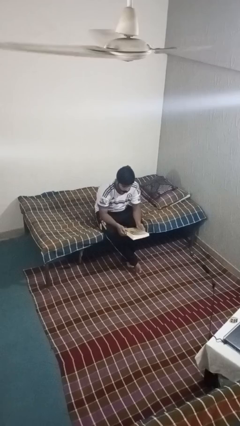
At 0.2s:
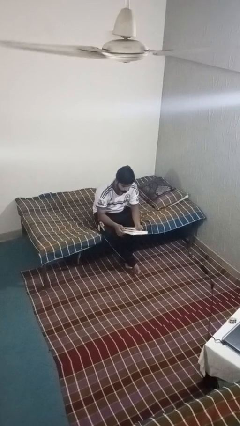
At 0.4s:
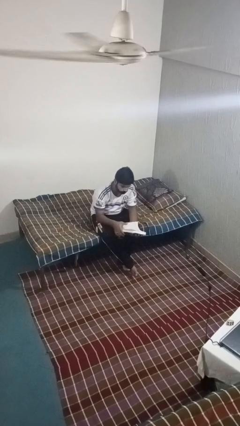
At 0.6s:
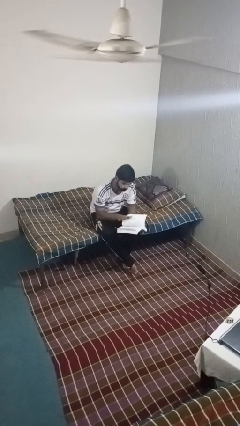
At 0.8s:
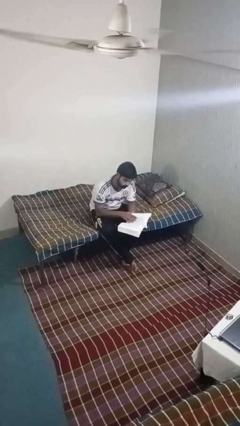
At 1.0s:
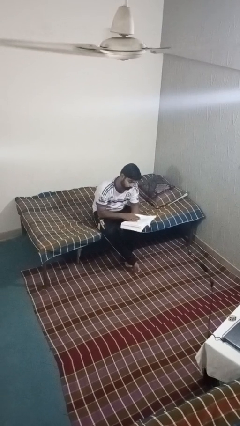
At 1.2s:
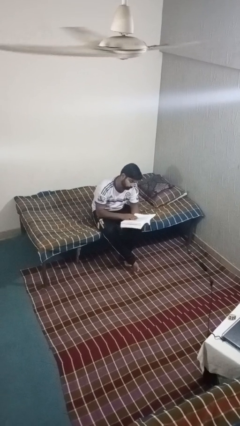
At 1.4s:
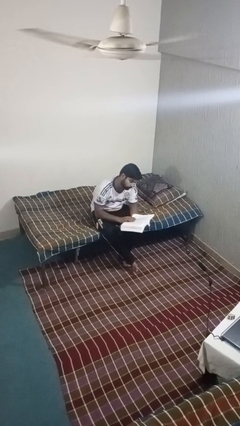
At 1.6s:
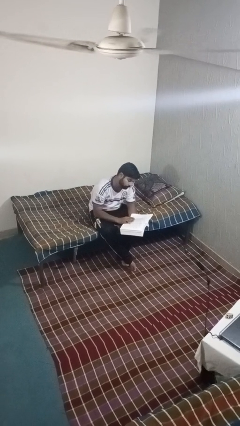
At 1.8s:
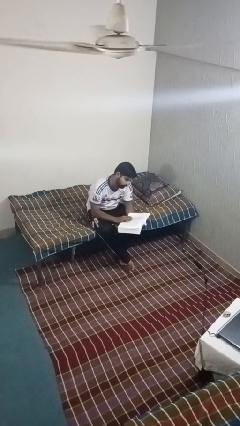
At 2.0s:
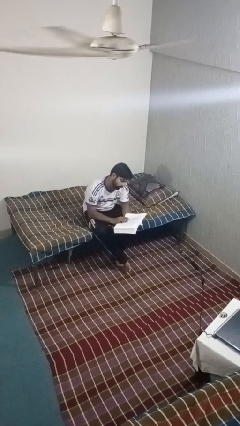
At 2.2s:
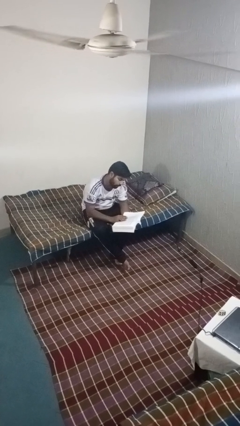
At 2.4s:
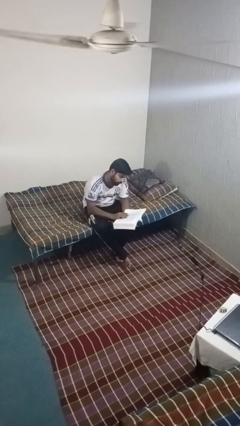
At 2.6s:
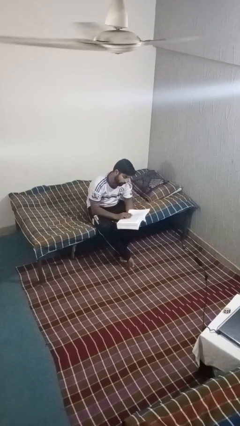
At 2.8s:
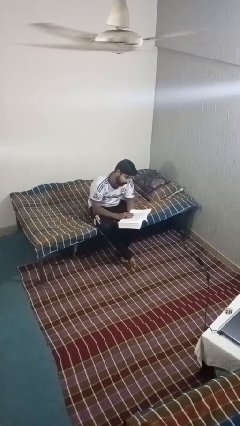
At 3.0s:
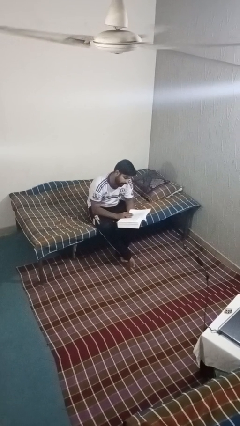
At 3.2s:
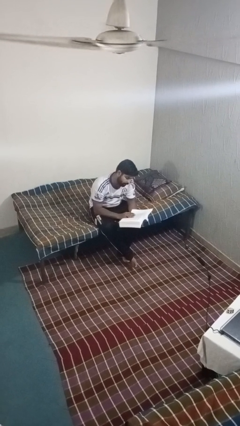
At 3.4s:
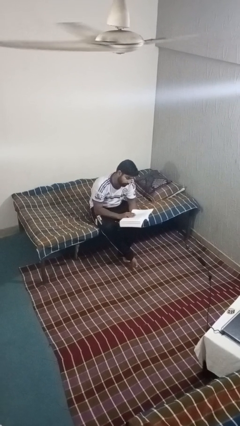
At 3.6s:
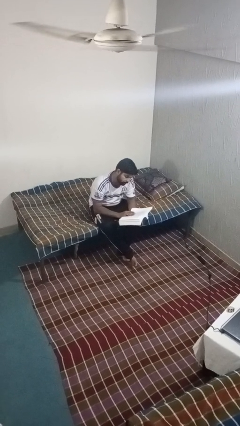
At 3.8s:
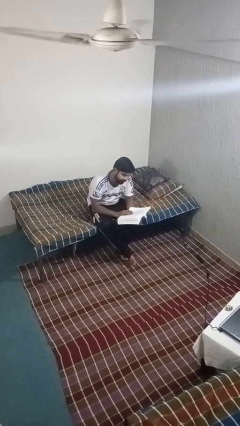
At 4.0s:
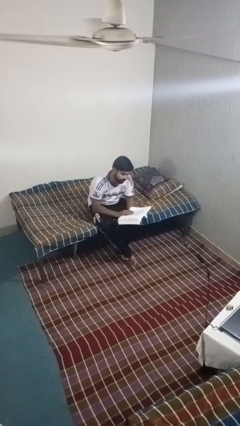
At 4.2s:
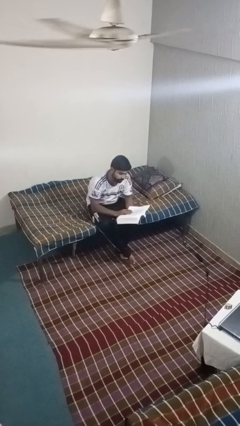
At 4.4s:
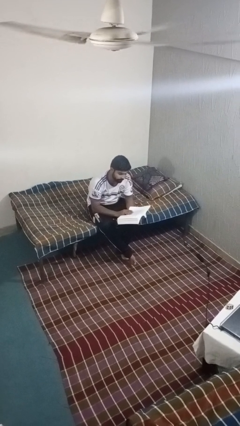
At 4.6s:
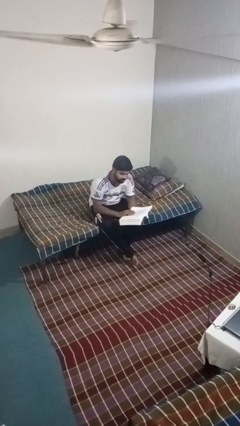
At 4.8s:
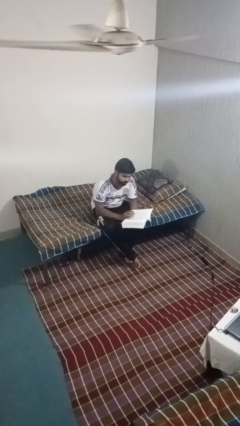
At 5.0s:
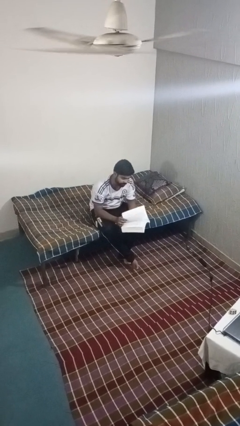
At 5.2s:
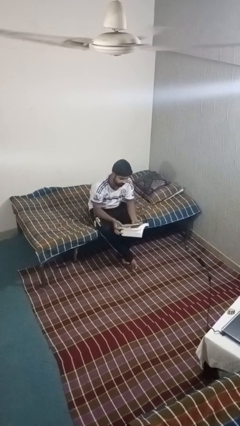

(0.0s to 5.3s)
person reads book

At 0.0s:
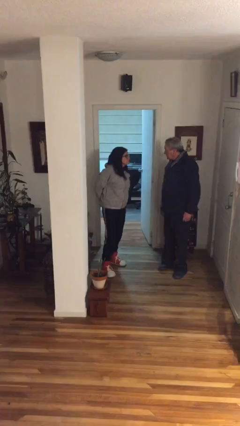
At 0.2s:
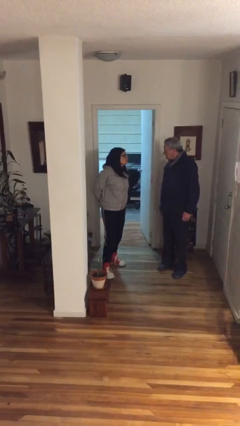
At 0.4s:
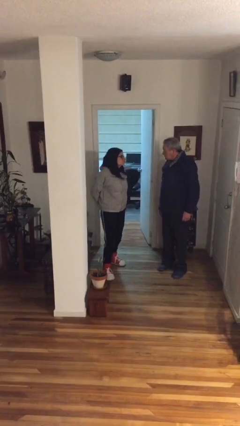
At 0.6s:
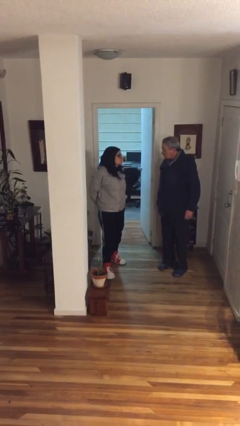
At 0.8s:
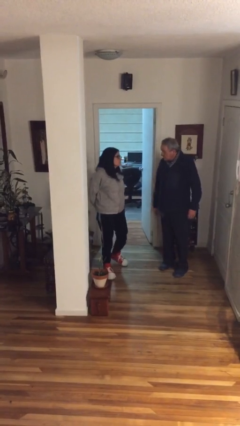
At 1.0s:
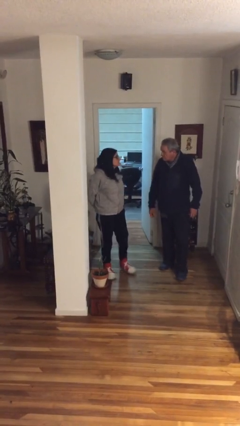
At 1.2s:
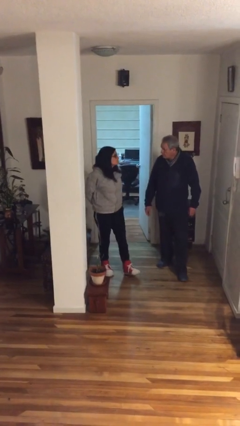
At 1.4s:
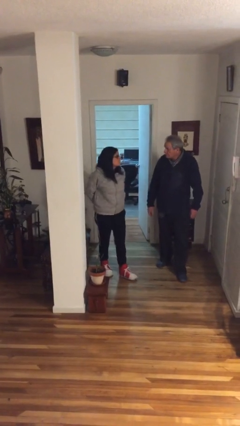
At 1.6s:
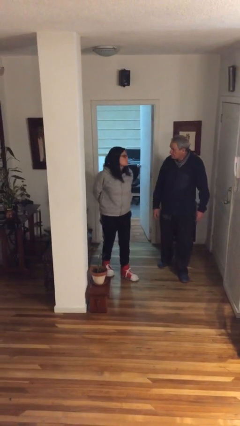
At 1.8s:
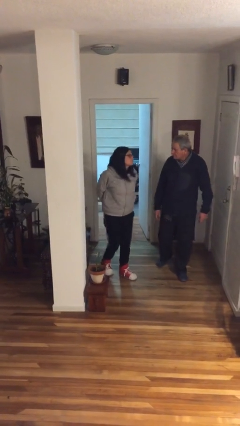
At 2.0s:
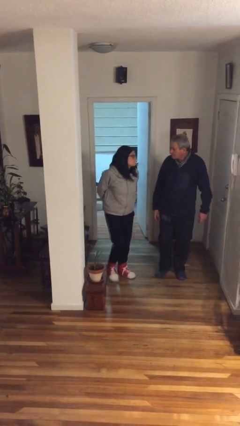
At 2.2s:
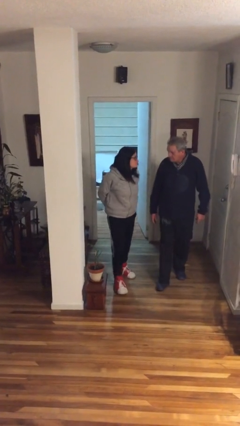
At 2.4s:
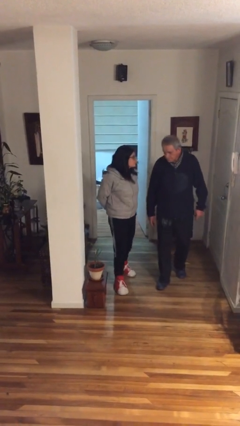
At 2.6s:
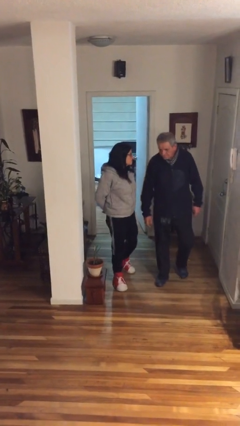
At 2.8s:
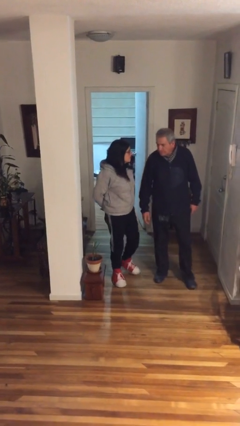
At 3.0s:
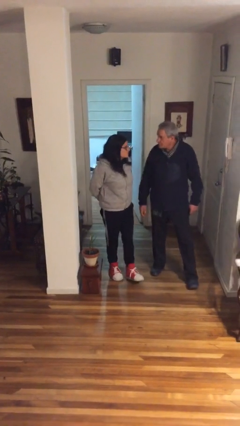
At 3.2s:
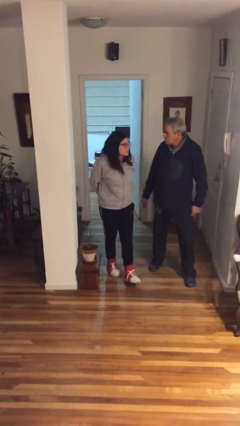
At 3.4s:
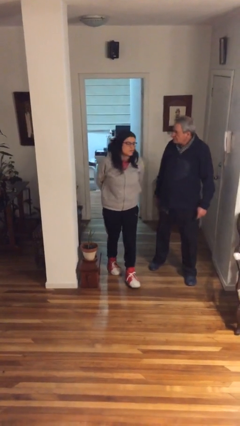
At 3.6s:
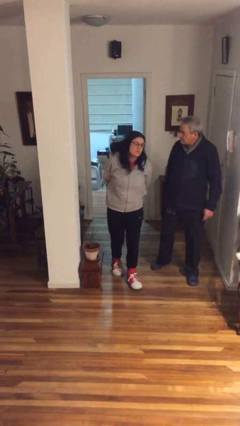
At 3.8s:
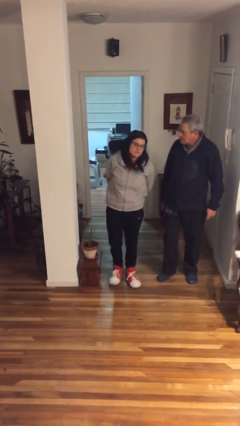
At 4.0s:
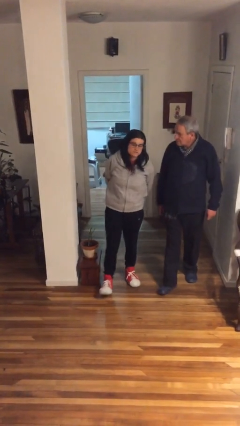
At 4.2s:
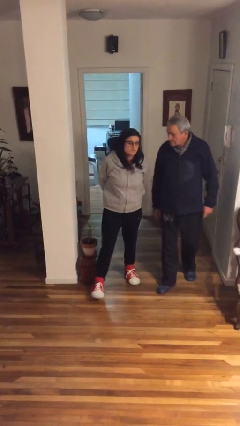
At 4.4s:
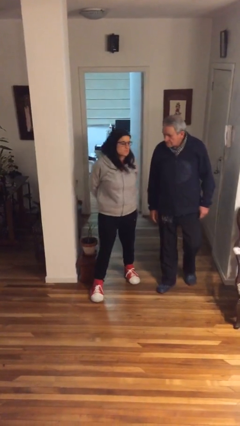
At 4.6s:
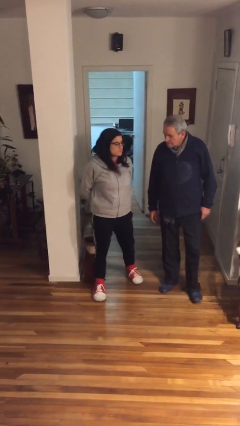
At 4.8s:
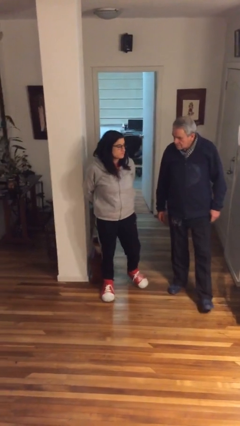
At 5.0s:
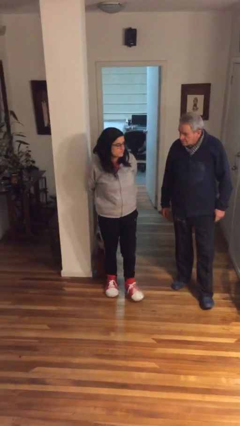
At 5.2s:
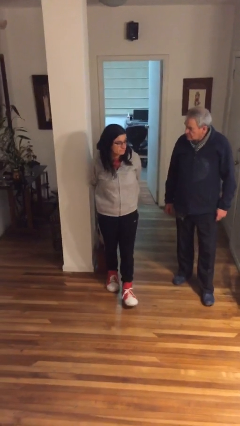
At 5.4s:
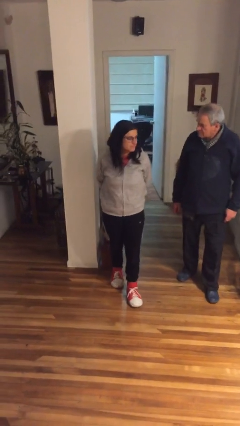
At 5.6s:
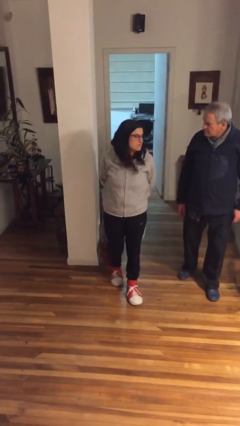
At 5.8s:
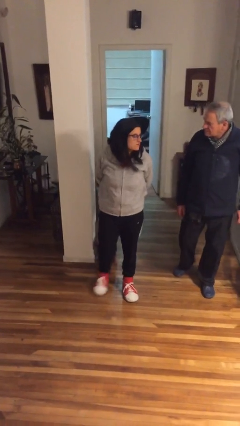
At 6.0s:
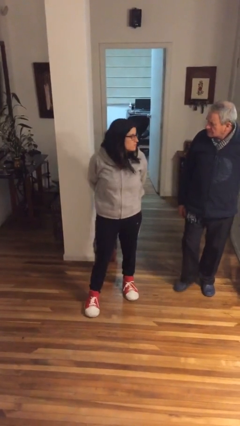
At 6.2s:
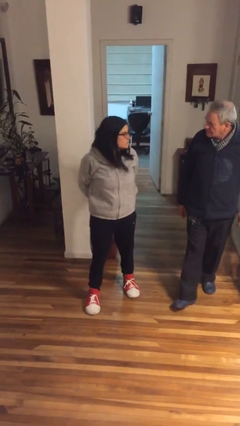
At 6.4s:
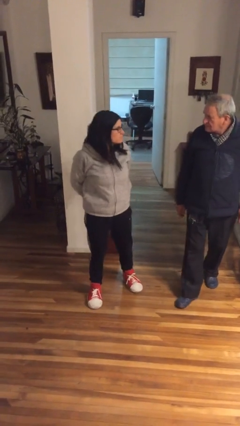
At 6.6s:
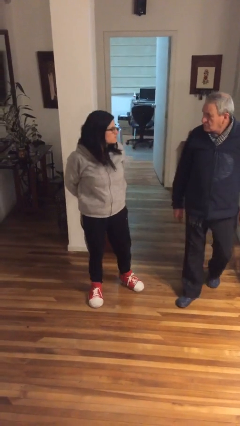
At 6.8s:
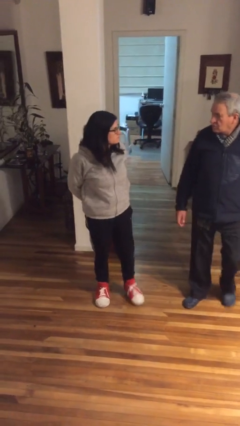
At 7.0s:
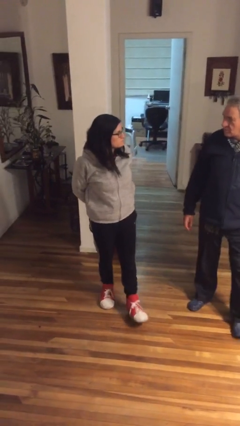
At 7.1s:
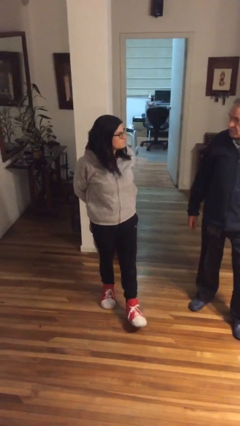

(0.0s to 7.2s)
person talks to person

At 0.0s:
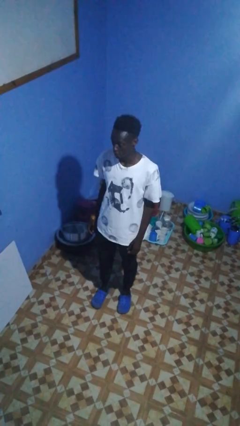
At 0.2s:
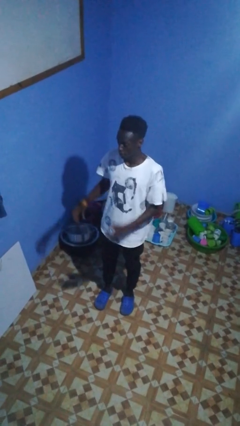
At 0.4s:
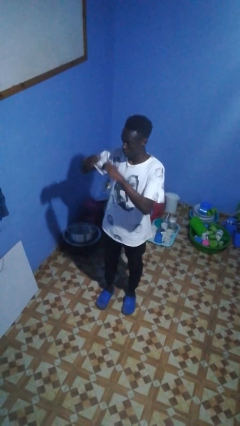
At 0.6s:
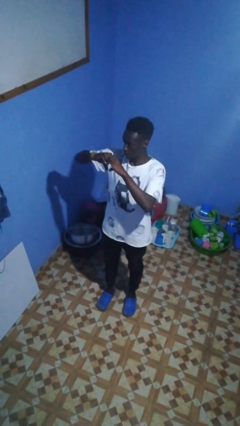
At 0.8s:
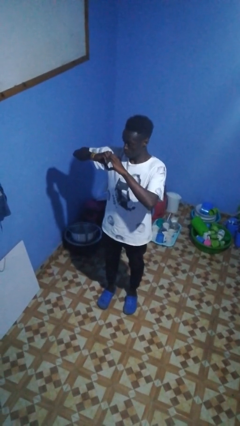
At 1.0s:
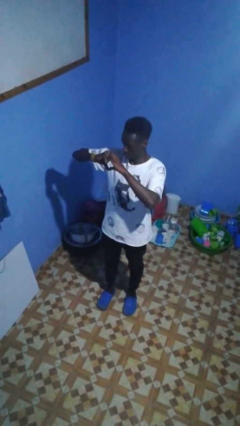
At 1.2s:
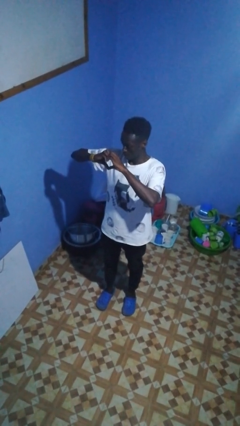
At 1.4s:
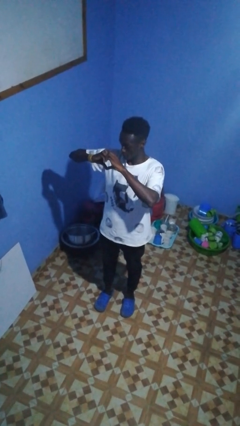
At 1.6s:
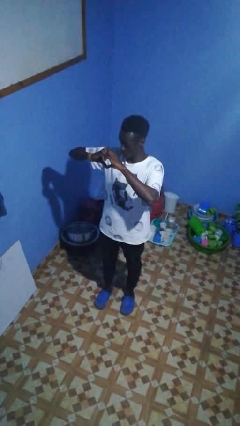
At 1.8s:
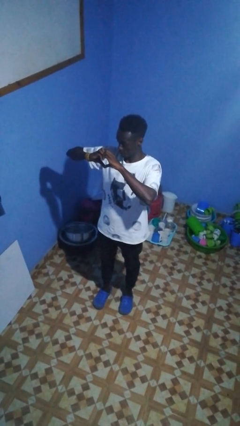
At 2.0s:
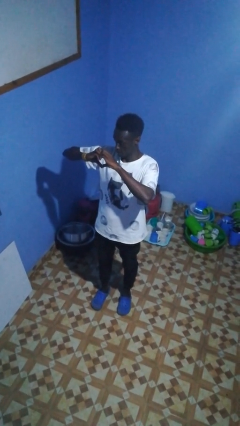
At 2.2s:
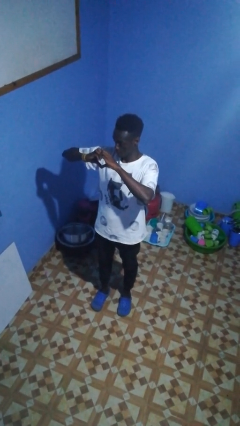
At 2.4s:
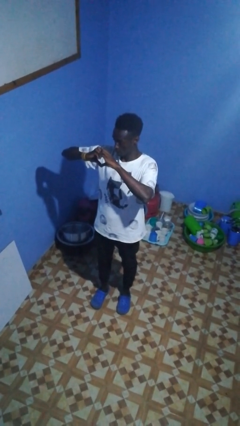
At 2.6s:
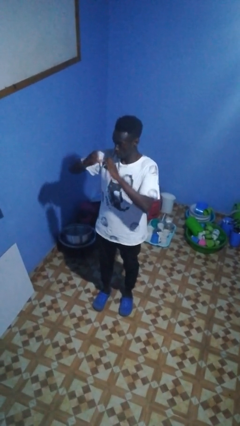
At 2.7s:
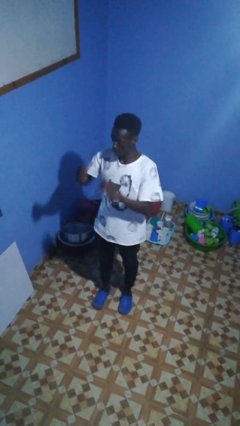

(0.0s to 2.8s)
person gestures heart

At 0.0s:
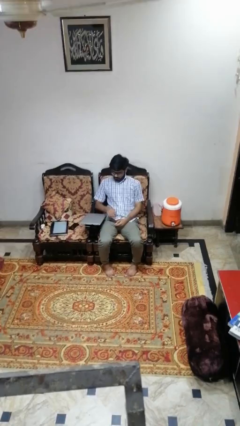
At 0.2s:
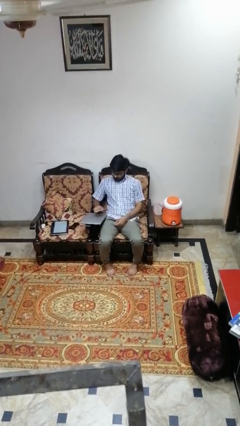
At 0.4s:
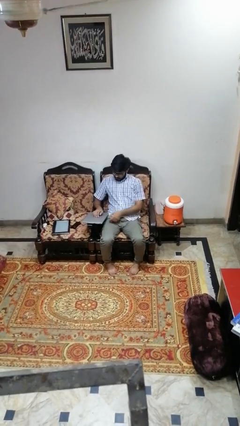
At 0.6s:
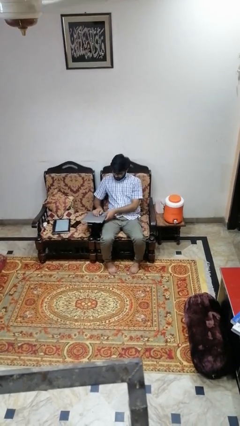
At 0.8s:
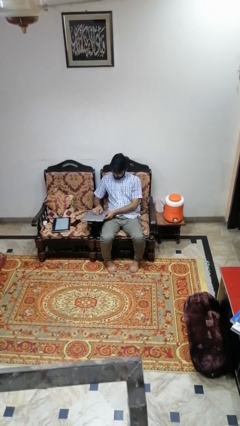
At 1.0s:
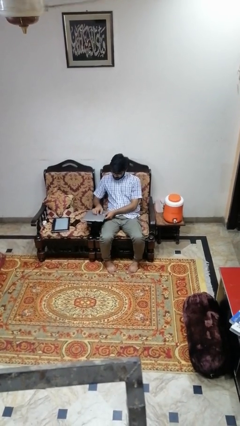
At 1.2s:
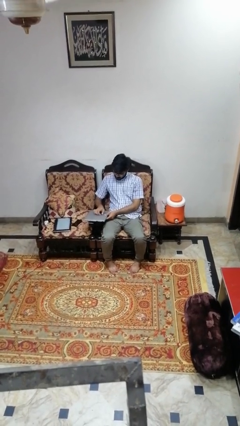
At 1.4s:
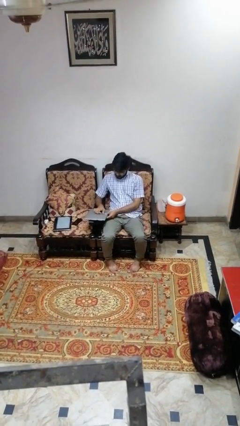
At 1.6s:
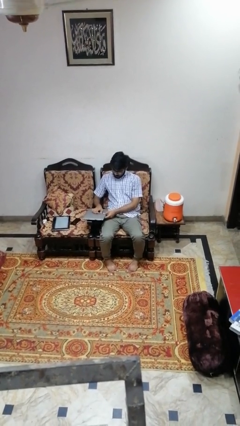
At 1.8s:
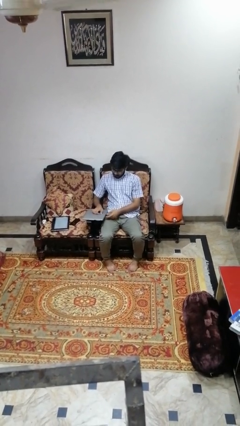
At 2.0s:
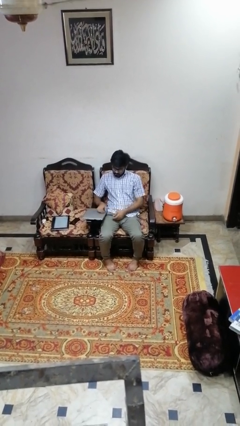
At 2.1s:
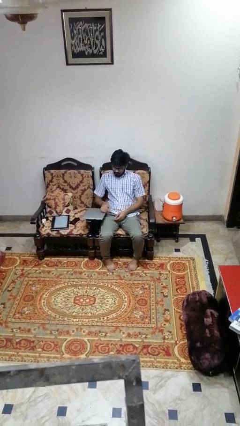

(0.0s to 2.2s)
person taps object with finger

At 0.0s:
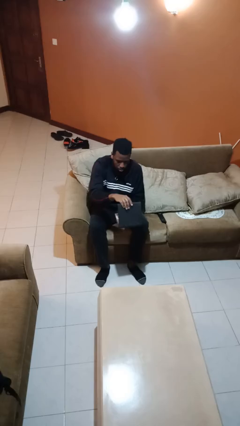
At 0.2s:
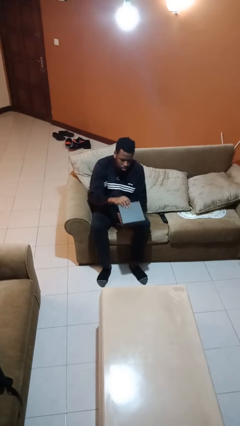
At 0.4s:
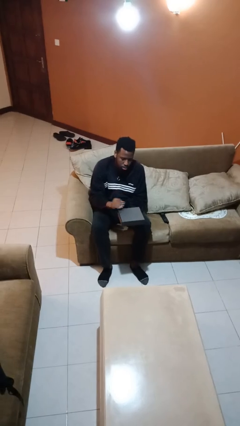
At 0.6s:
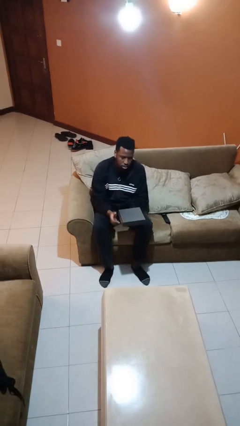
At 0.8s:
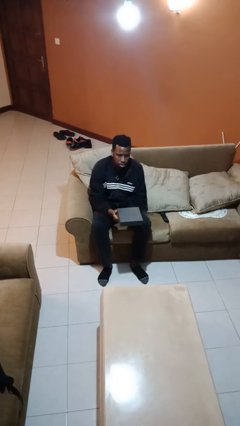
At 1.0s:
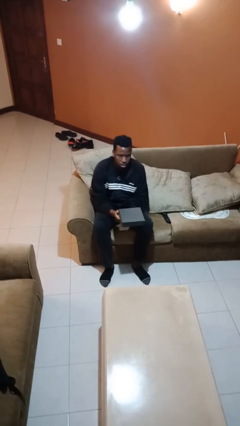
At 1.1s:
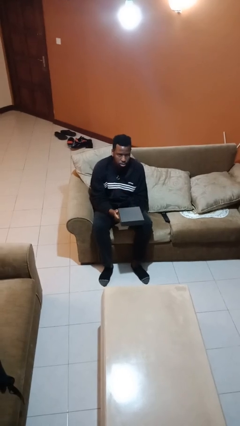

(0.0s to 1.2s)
person closes jewelry box
